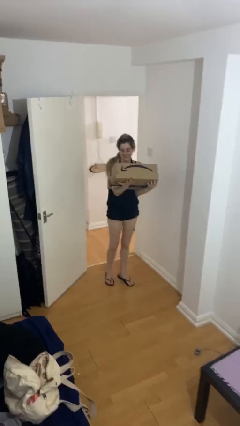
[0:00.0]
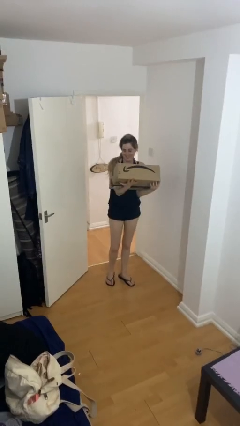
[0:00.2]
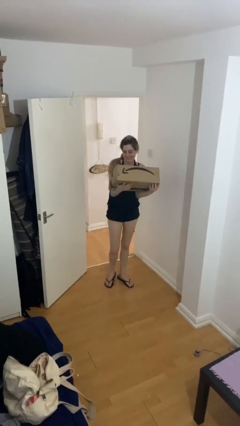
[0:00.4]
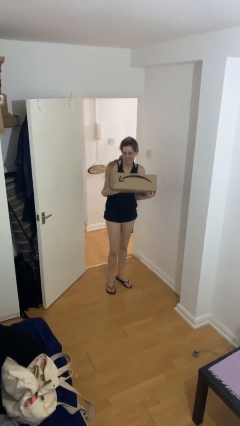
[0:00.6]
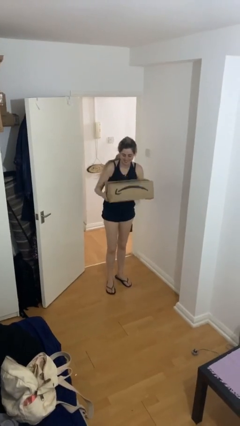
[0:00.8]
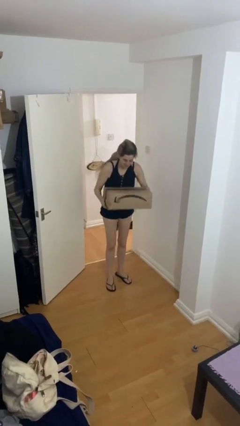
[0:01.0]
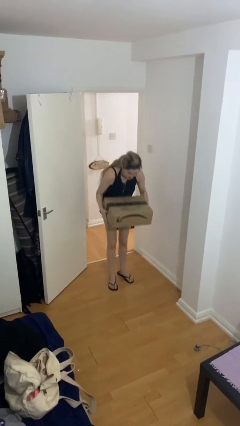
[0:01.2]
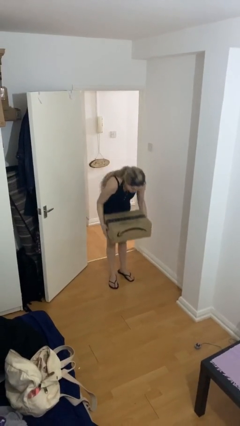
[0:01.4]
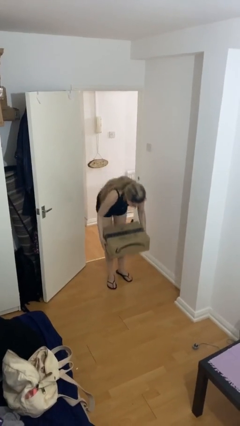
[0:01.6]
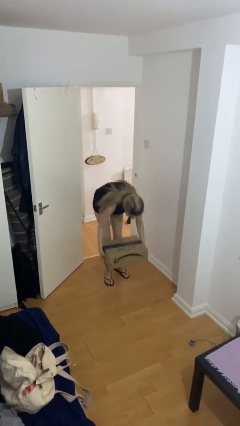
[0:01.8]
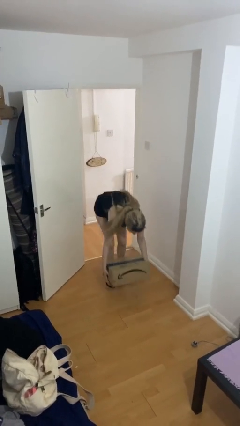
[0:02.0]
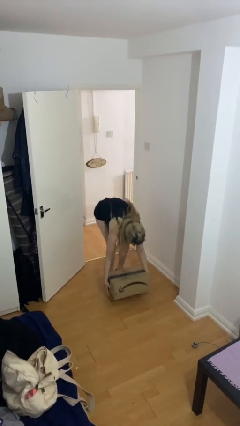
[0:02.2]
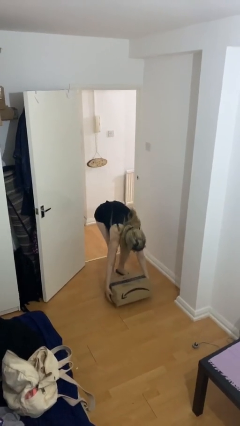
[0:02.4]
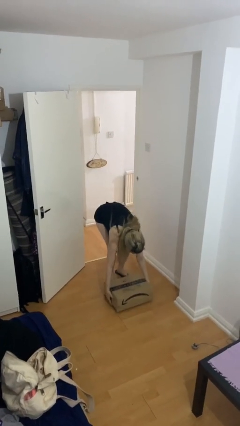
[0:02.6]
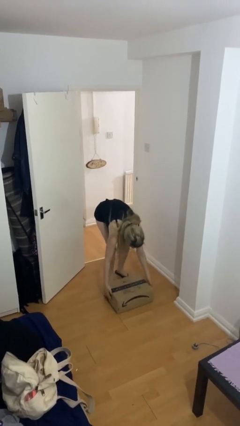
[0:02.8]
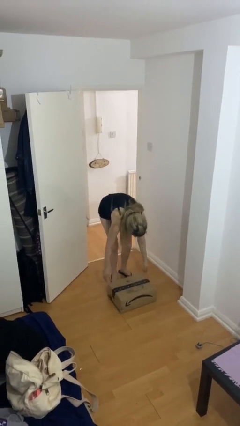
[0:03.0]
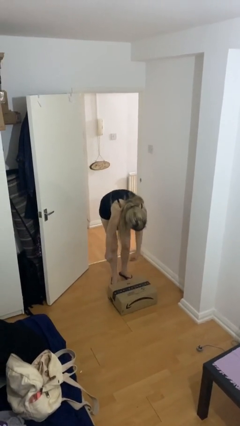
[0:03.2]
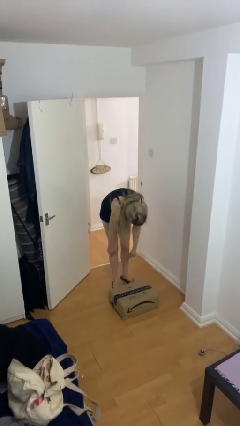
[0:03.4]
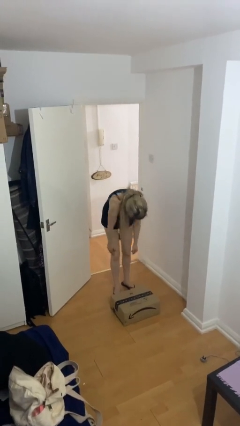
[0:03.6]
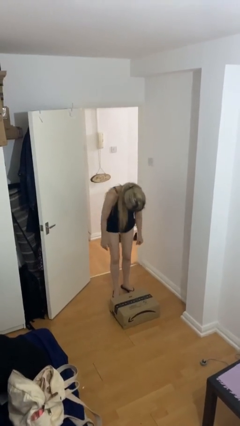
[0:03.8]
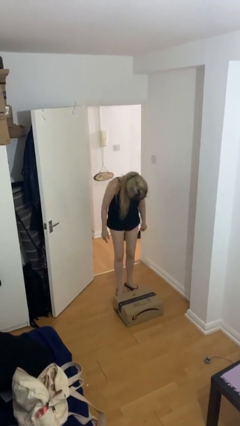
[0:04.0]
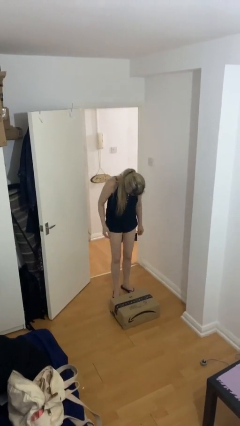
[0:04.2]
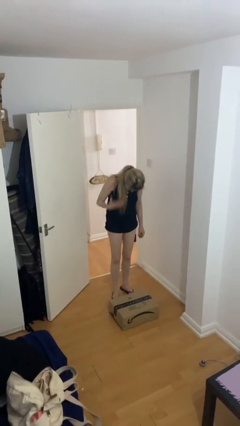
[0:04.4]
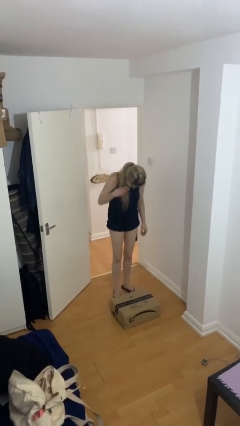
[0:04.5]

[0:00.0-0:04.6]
person puts down object on floor

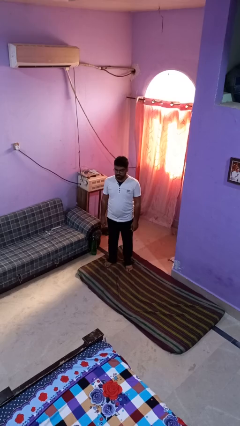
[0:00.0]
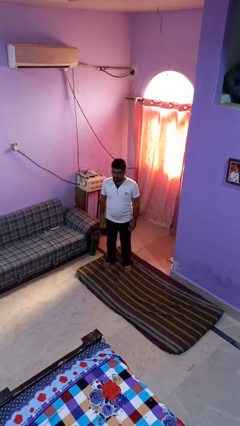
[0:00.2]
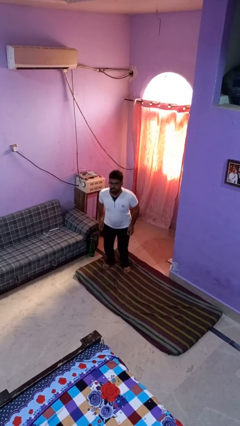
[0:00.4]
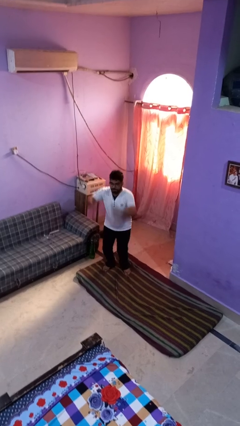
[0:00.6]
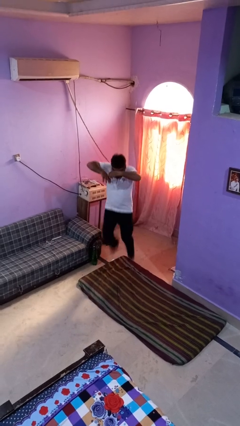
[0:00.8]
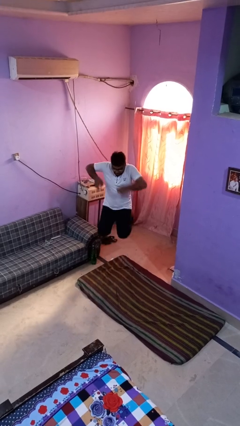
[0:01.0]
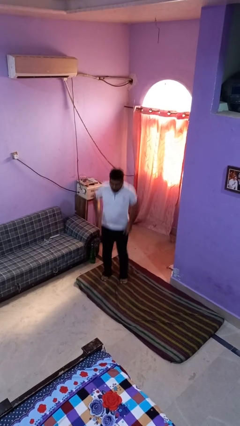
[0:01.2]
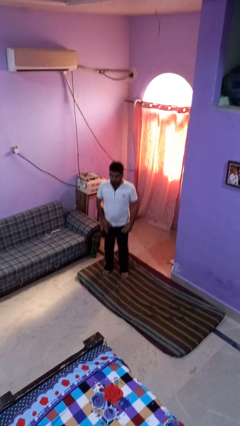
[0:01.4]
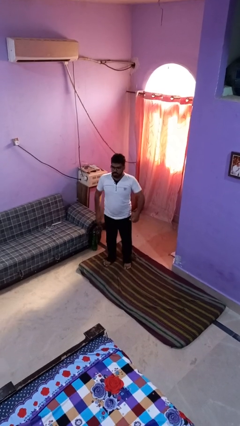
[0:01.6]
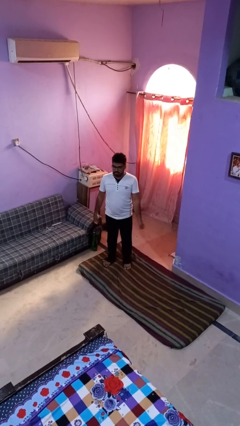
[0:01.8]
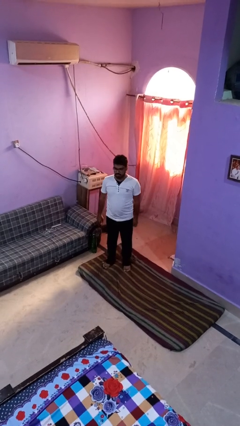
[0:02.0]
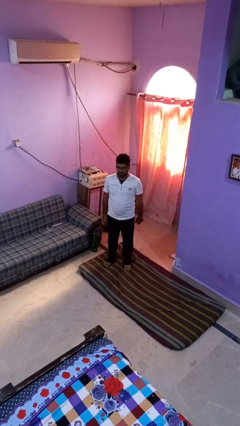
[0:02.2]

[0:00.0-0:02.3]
person jumps

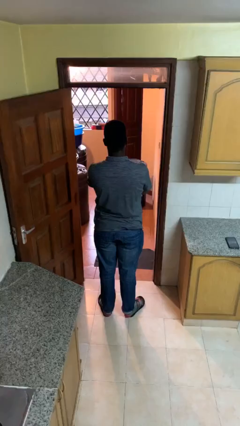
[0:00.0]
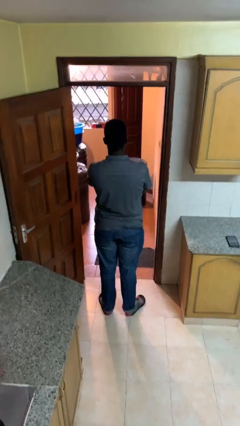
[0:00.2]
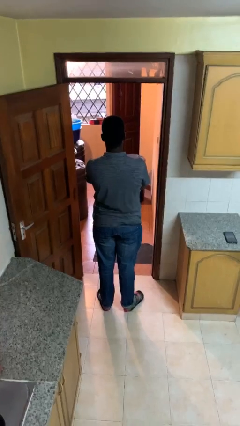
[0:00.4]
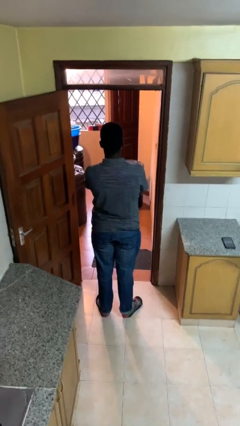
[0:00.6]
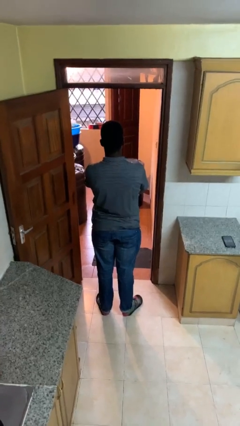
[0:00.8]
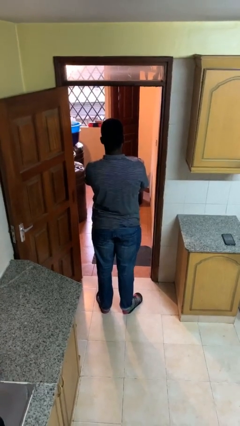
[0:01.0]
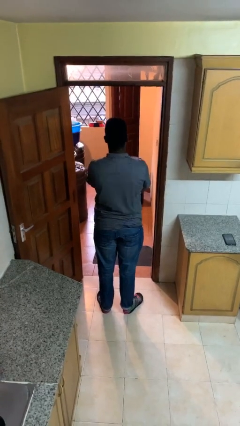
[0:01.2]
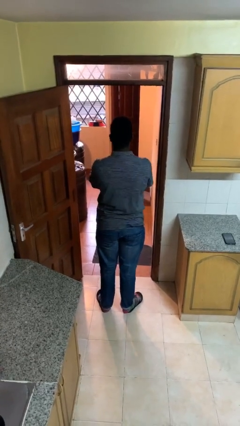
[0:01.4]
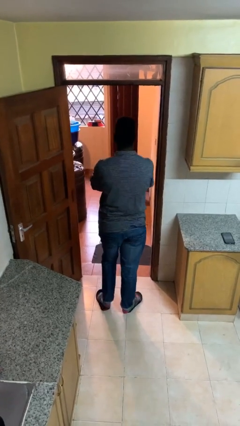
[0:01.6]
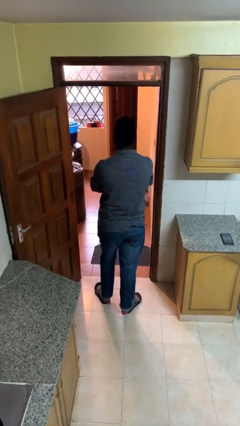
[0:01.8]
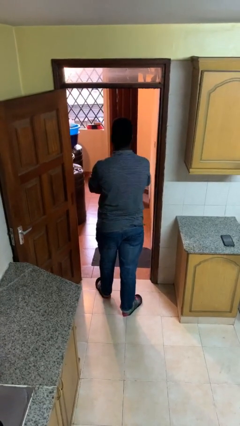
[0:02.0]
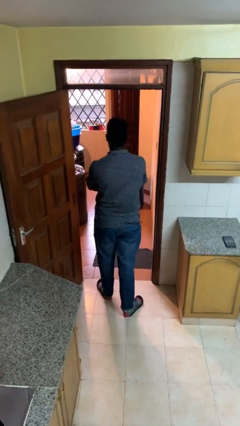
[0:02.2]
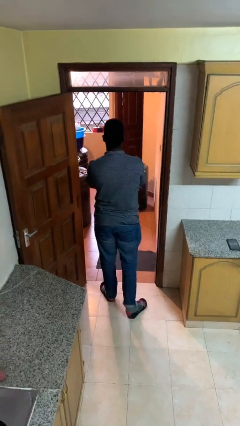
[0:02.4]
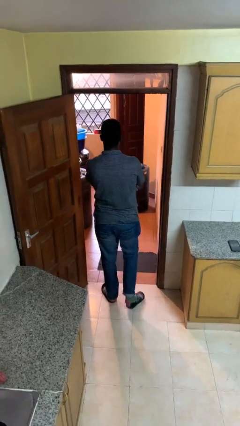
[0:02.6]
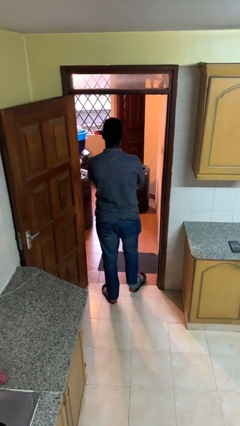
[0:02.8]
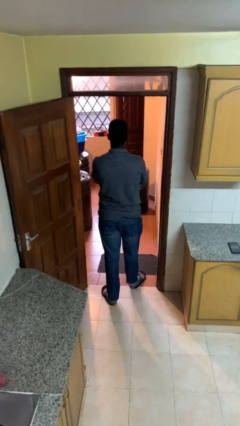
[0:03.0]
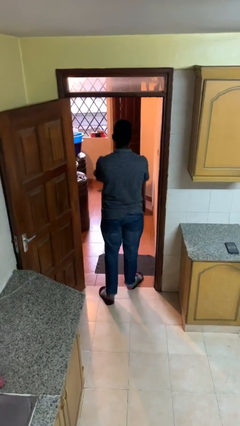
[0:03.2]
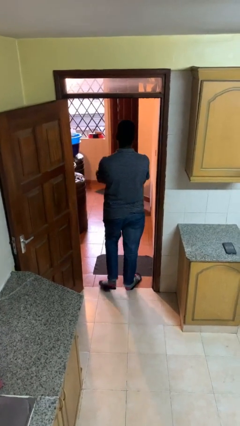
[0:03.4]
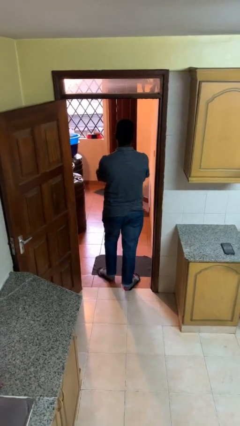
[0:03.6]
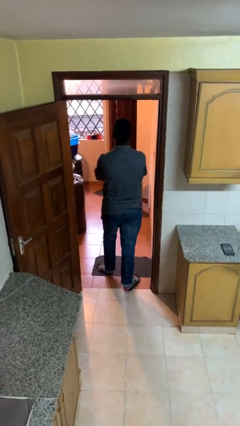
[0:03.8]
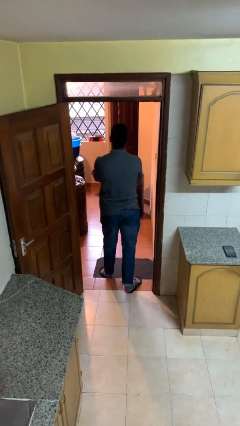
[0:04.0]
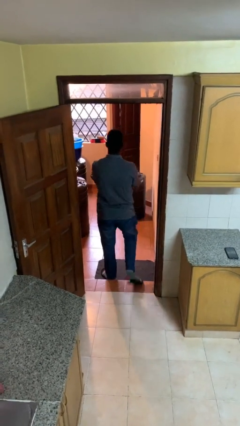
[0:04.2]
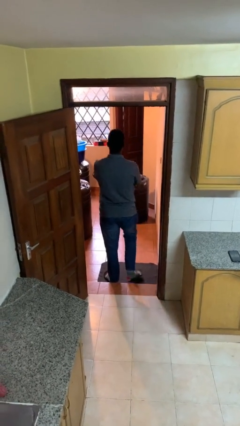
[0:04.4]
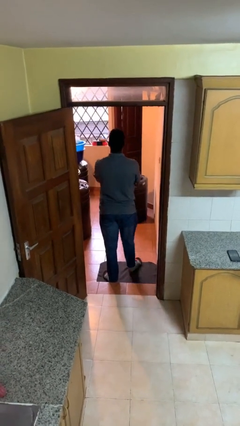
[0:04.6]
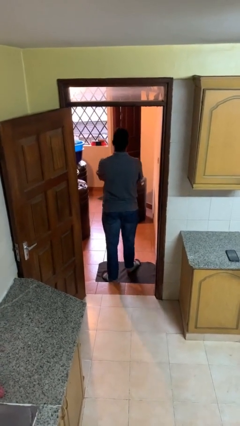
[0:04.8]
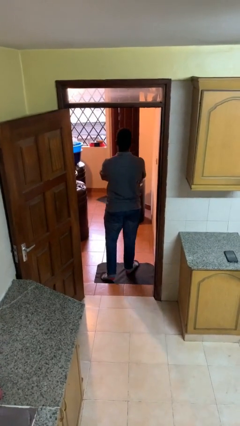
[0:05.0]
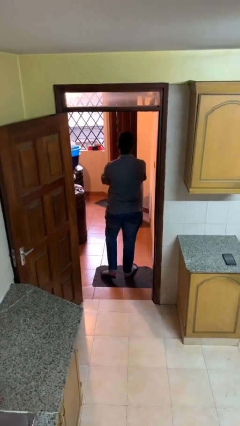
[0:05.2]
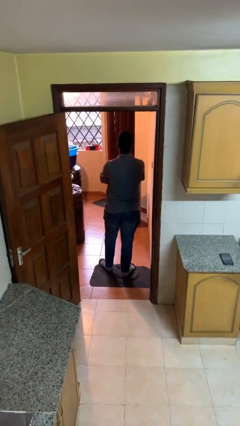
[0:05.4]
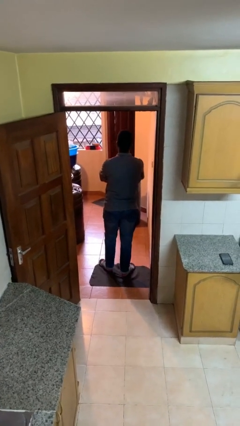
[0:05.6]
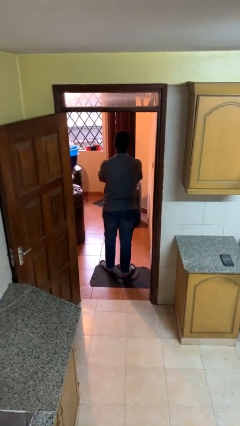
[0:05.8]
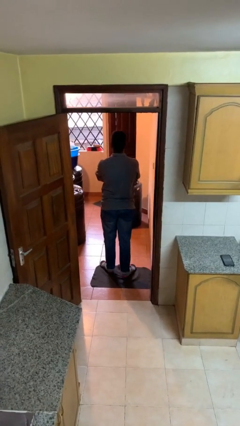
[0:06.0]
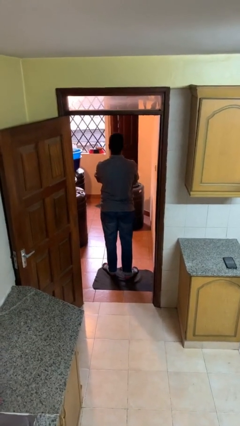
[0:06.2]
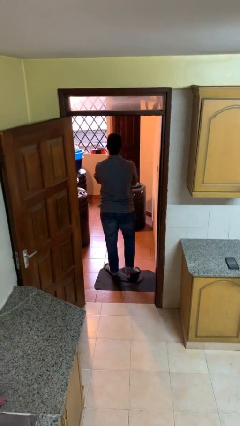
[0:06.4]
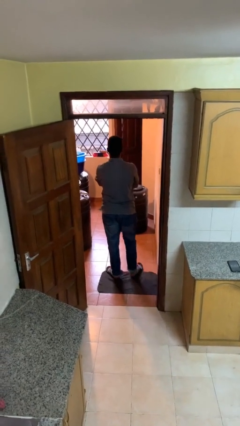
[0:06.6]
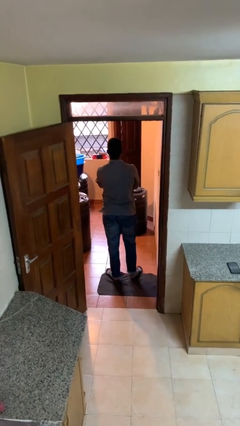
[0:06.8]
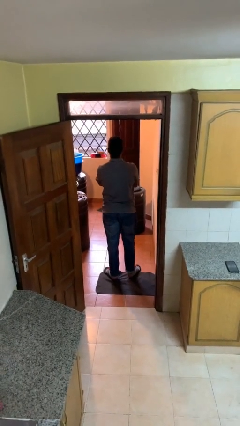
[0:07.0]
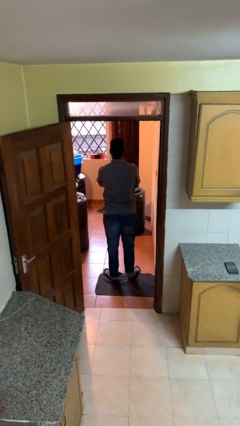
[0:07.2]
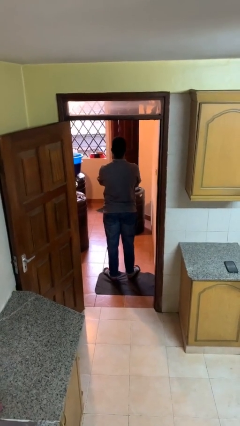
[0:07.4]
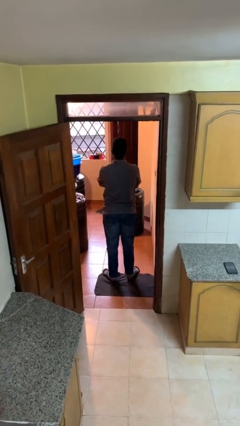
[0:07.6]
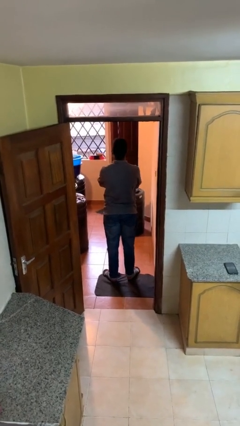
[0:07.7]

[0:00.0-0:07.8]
person exits scene through structure

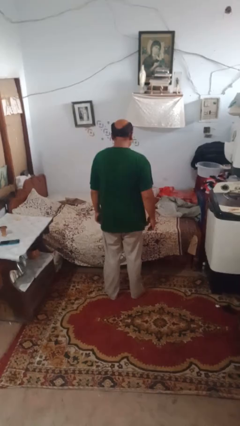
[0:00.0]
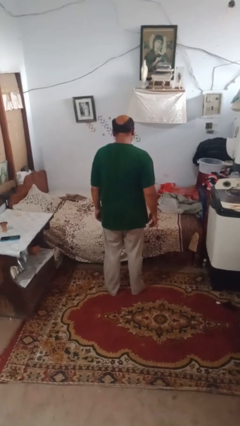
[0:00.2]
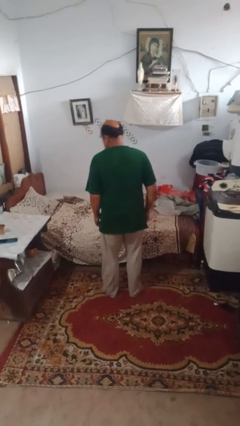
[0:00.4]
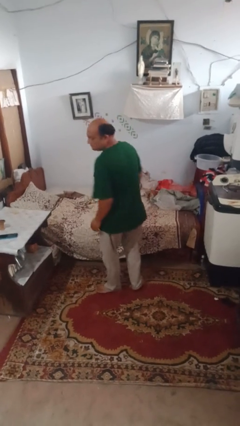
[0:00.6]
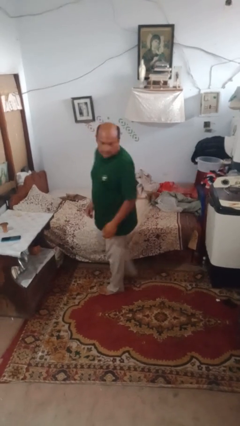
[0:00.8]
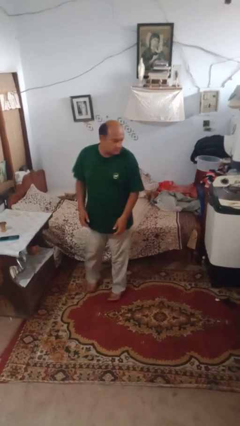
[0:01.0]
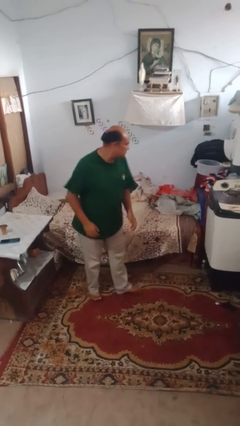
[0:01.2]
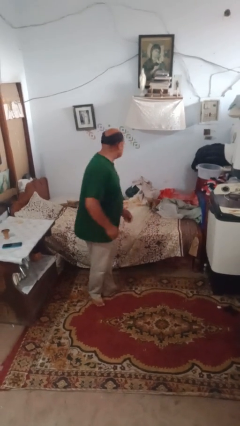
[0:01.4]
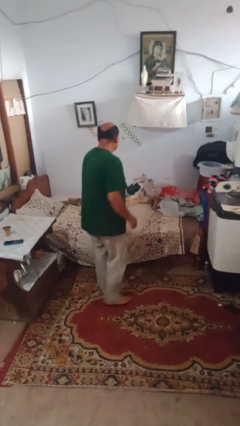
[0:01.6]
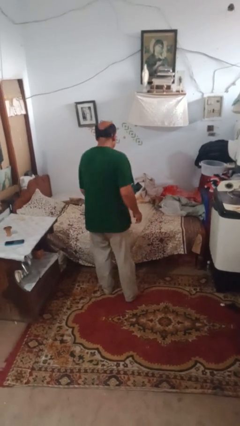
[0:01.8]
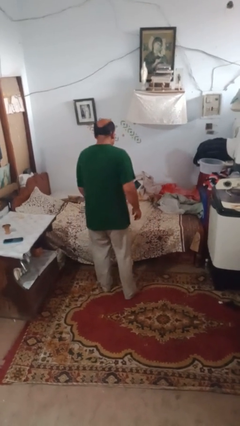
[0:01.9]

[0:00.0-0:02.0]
person twirls

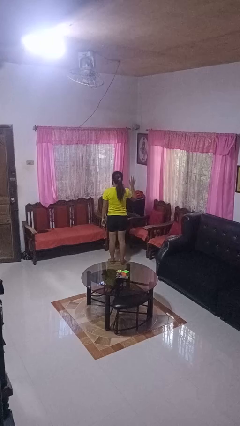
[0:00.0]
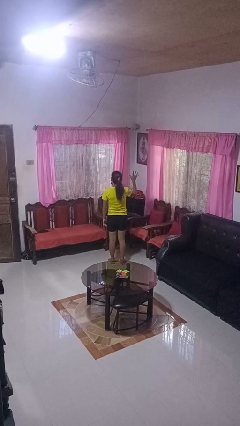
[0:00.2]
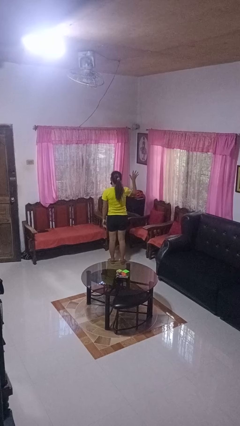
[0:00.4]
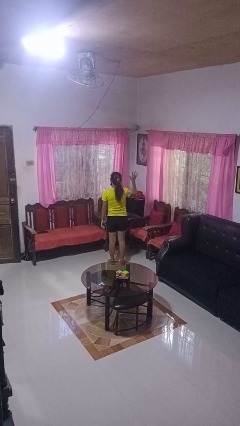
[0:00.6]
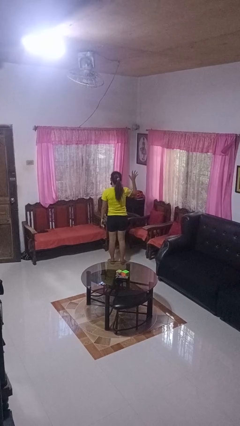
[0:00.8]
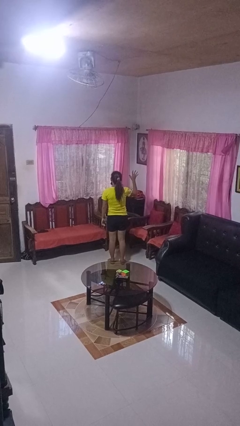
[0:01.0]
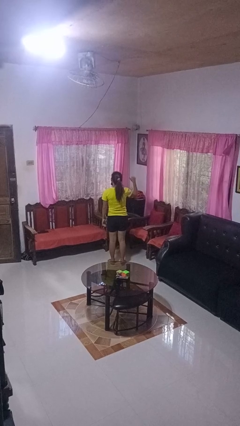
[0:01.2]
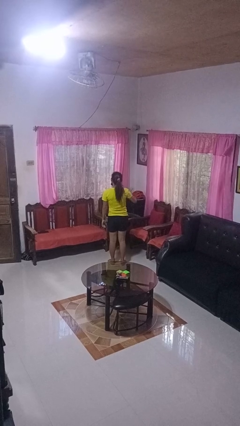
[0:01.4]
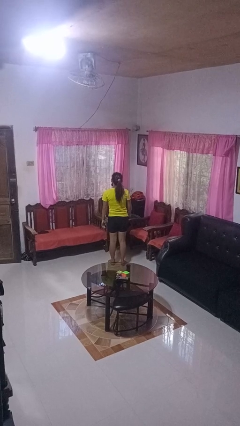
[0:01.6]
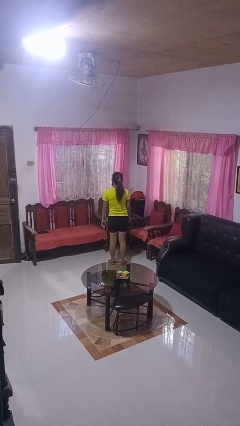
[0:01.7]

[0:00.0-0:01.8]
person gestures number five
